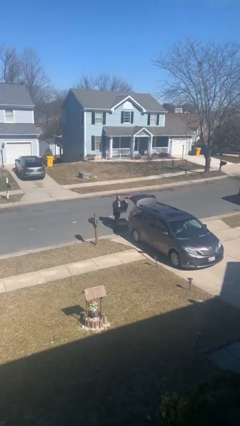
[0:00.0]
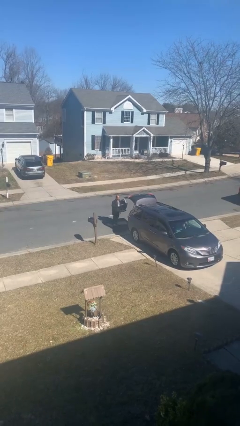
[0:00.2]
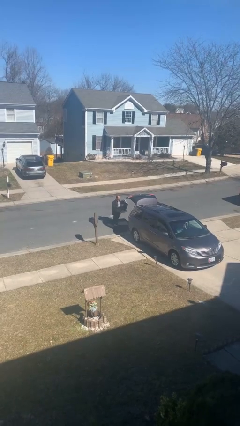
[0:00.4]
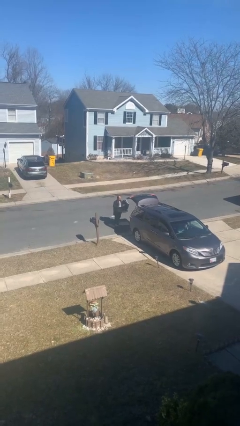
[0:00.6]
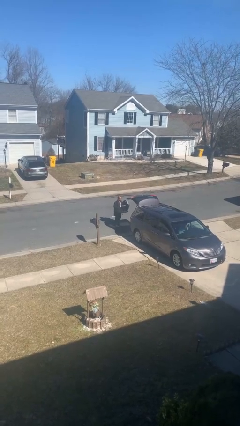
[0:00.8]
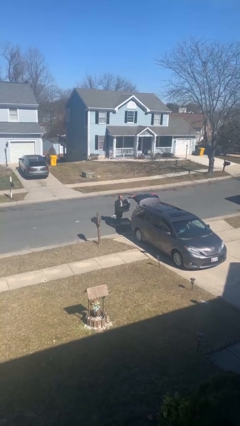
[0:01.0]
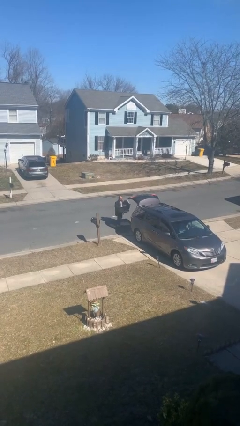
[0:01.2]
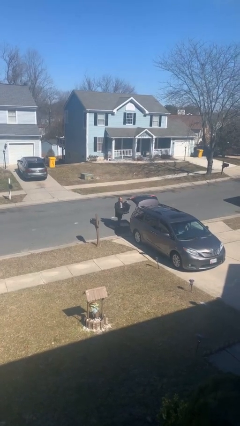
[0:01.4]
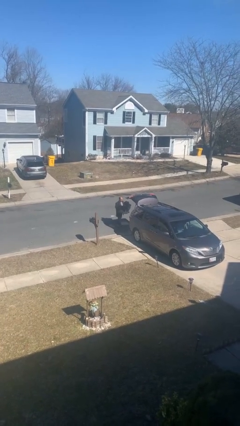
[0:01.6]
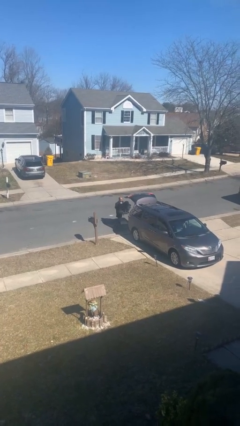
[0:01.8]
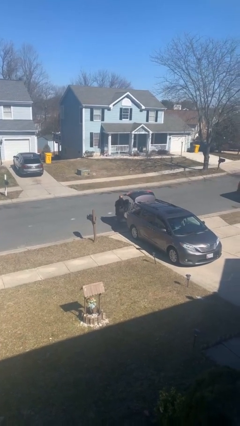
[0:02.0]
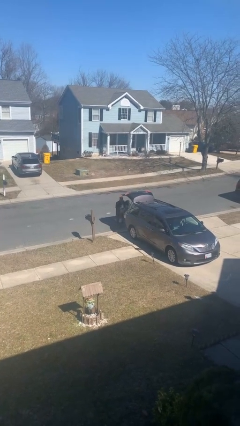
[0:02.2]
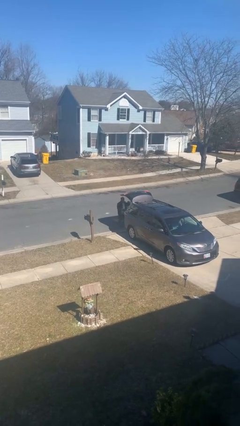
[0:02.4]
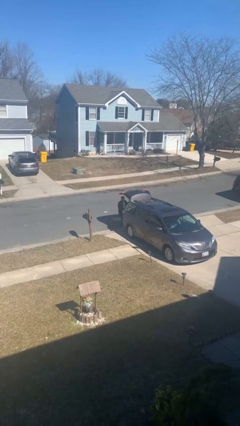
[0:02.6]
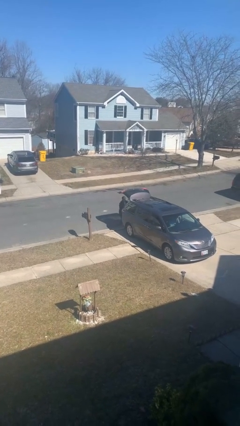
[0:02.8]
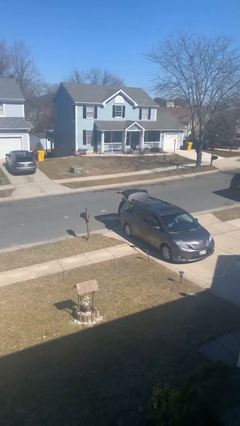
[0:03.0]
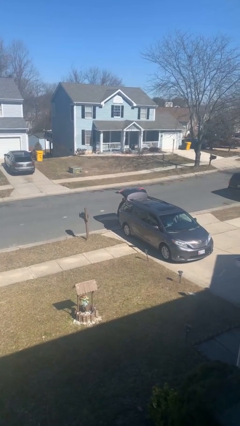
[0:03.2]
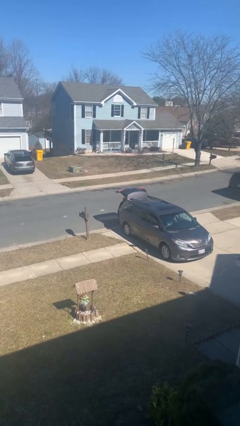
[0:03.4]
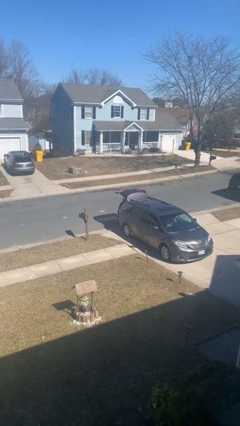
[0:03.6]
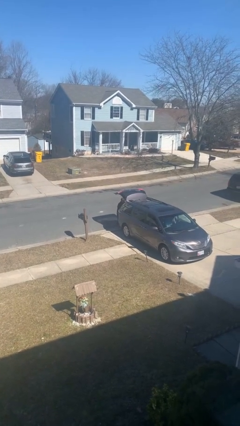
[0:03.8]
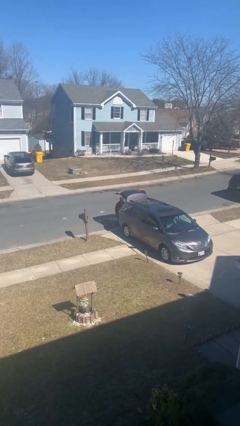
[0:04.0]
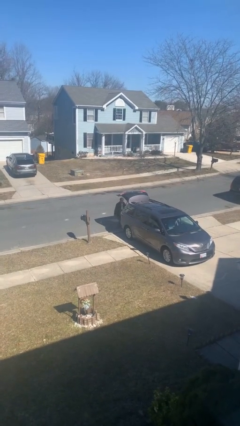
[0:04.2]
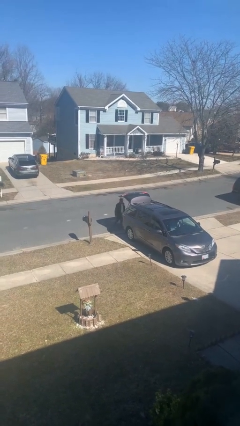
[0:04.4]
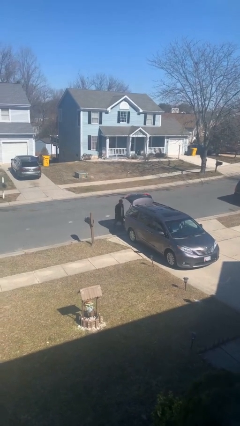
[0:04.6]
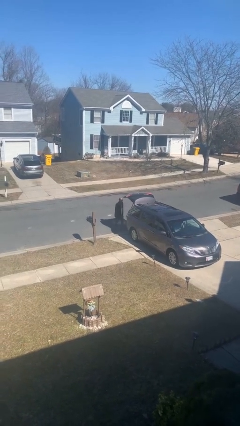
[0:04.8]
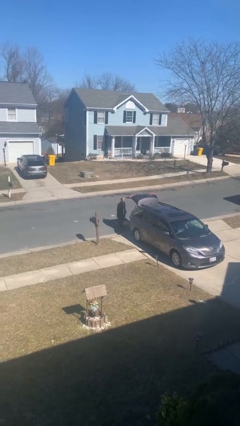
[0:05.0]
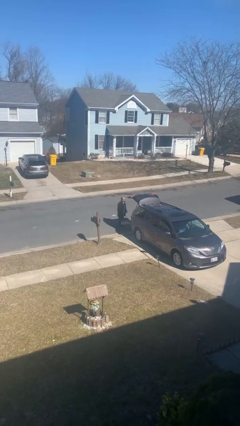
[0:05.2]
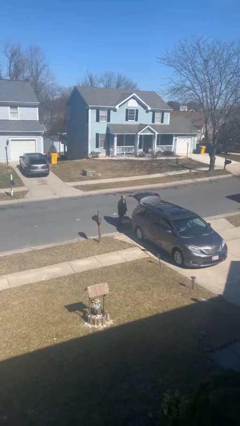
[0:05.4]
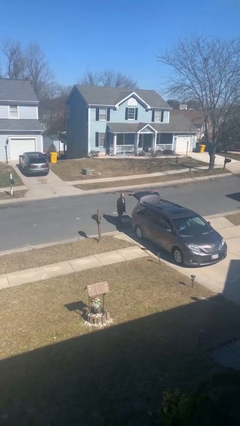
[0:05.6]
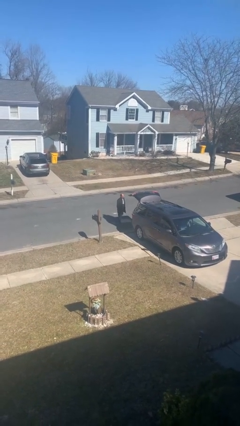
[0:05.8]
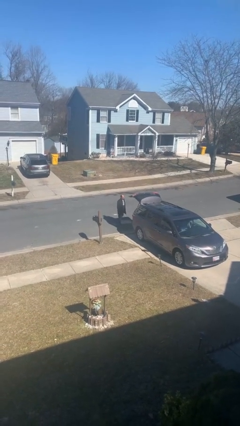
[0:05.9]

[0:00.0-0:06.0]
person loads car

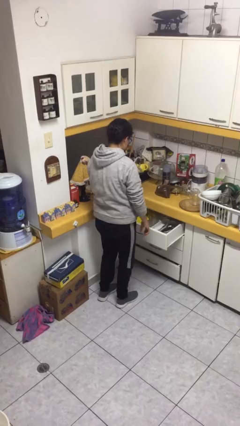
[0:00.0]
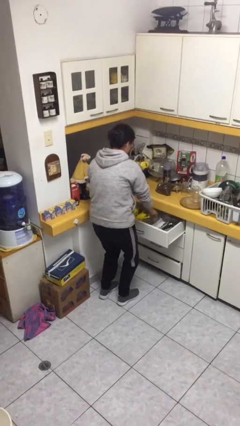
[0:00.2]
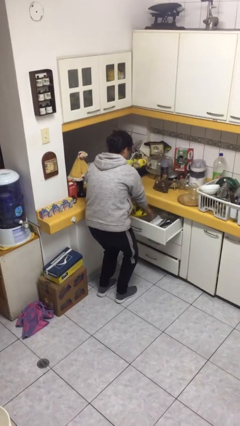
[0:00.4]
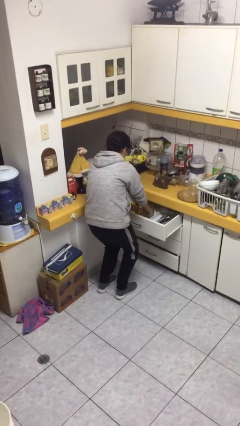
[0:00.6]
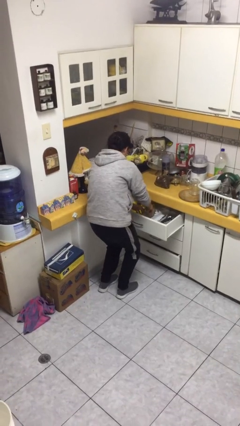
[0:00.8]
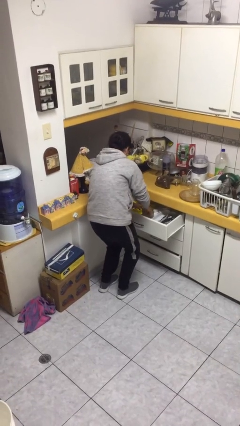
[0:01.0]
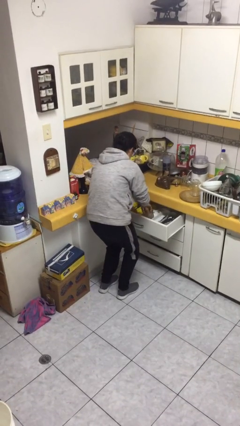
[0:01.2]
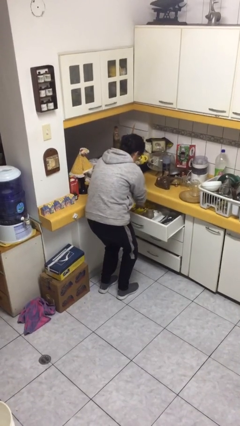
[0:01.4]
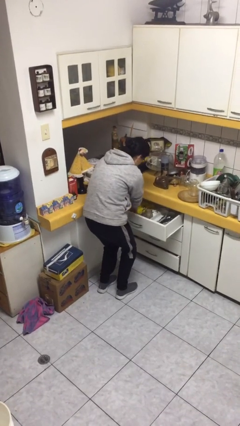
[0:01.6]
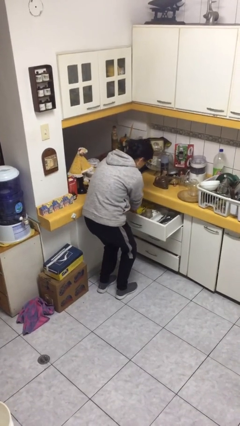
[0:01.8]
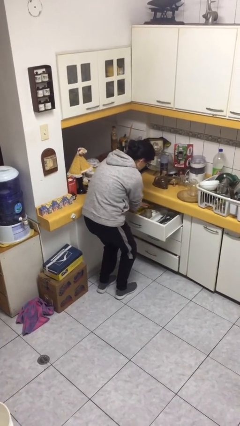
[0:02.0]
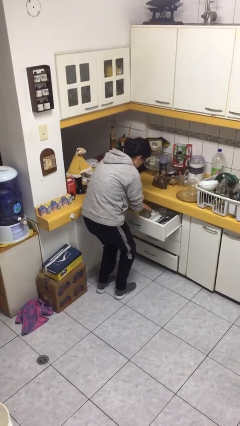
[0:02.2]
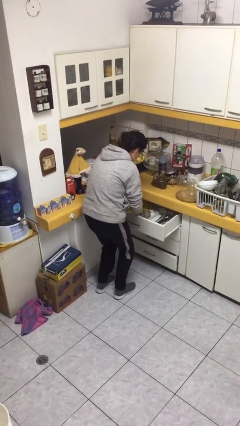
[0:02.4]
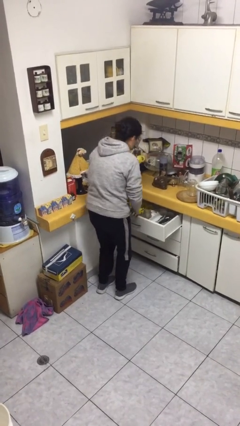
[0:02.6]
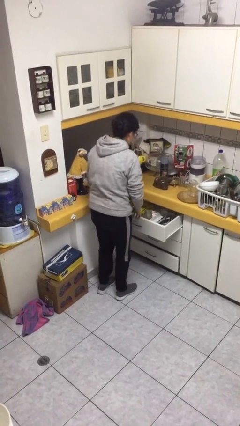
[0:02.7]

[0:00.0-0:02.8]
person searches in kitchen drawer

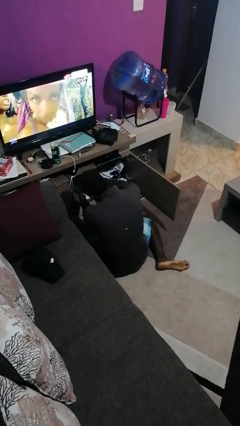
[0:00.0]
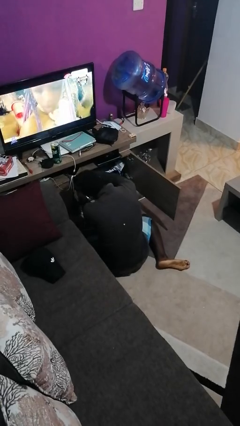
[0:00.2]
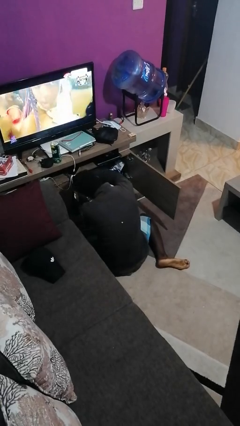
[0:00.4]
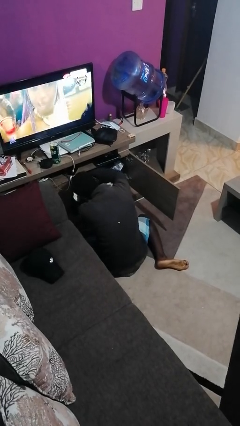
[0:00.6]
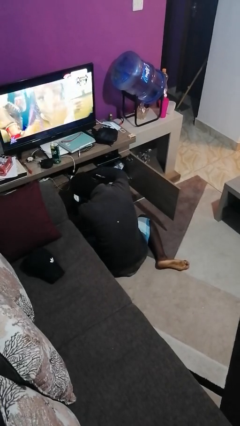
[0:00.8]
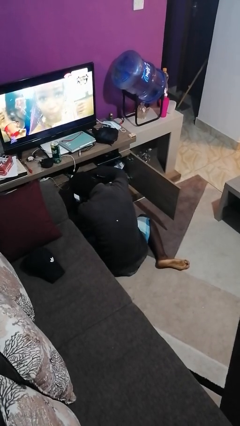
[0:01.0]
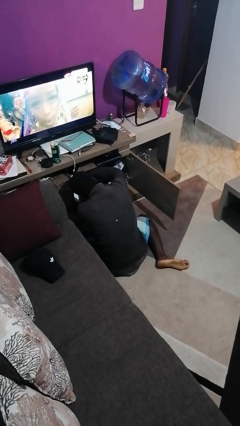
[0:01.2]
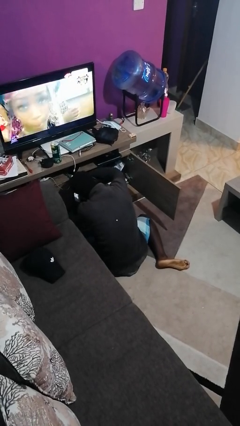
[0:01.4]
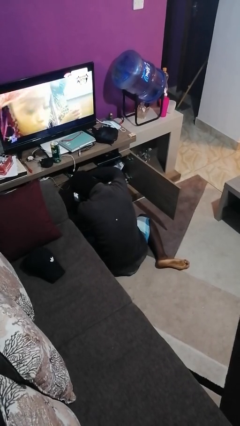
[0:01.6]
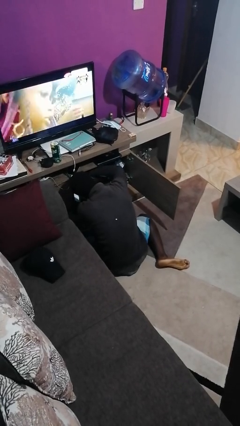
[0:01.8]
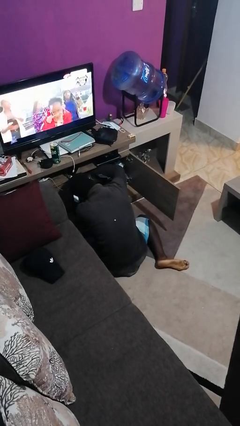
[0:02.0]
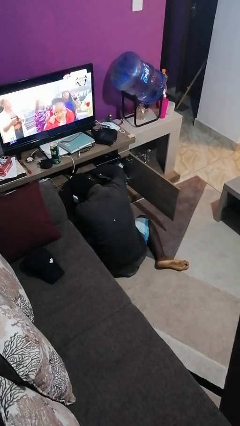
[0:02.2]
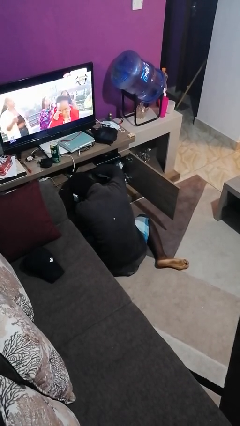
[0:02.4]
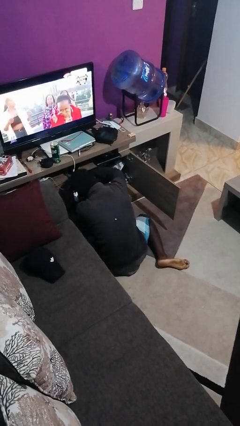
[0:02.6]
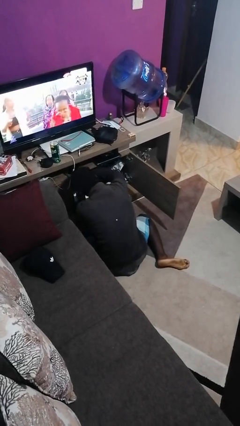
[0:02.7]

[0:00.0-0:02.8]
person searches in cabinet

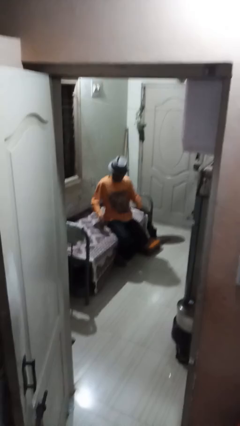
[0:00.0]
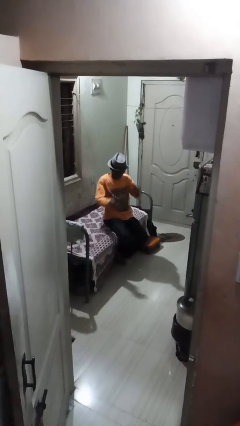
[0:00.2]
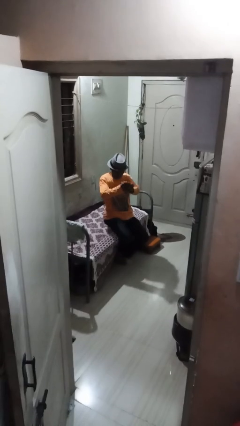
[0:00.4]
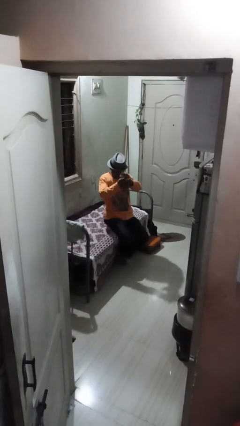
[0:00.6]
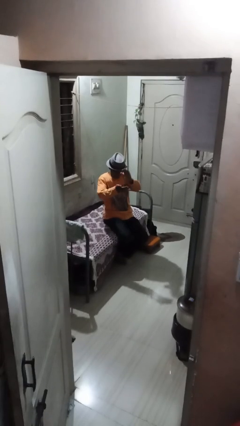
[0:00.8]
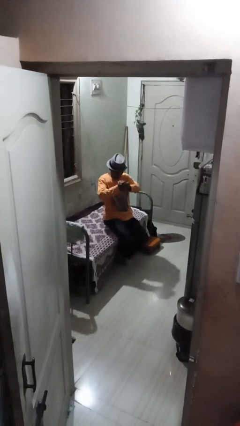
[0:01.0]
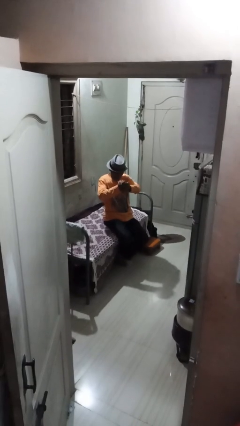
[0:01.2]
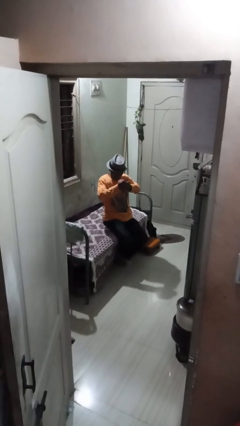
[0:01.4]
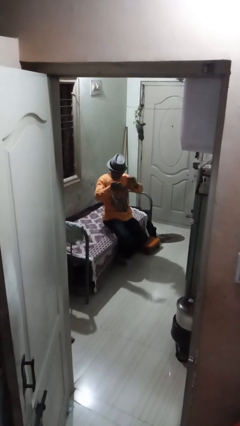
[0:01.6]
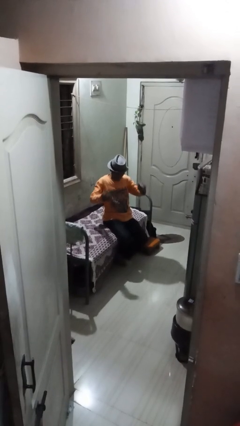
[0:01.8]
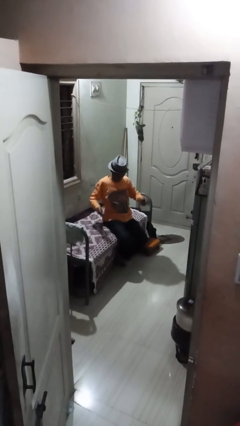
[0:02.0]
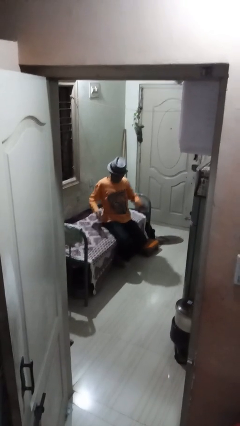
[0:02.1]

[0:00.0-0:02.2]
person claps hands

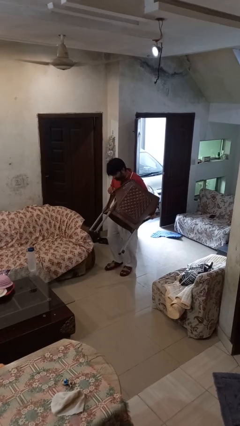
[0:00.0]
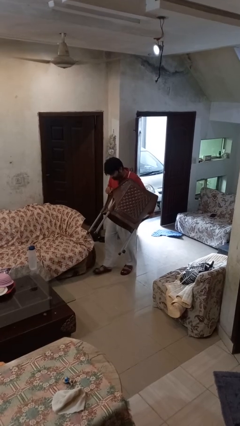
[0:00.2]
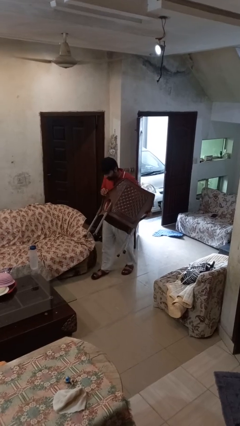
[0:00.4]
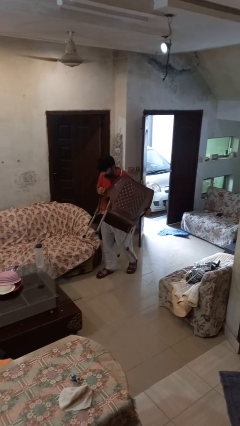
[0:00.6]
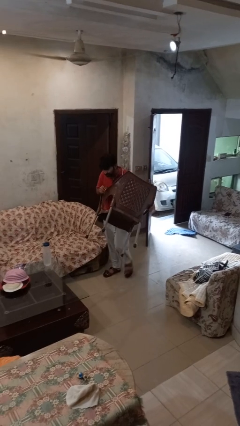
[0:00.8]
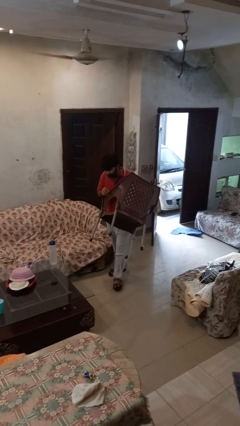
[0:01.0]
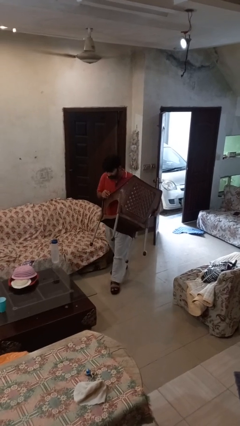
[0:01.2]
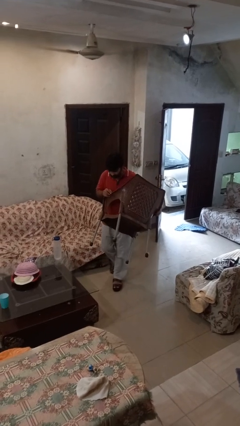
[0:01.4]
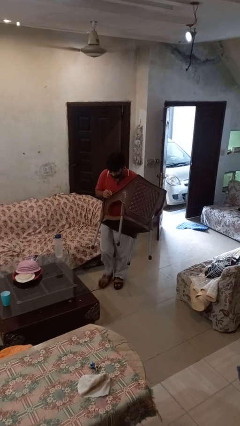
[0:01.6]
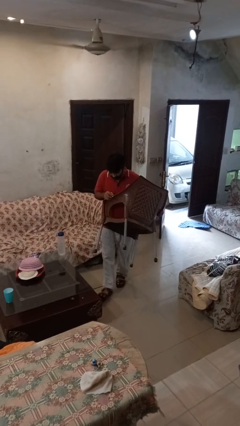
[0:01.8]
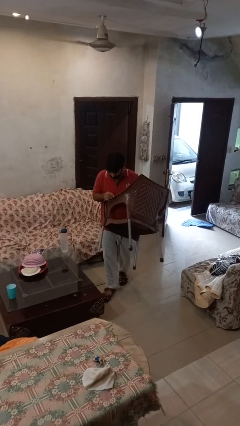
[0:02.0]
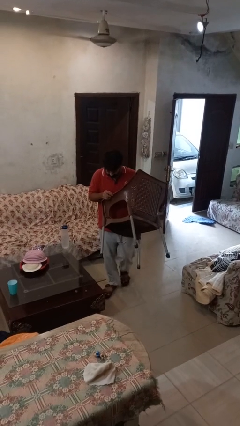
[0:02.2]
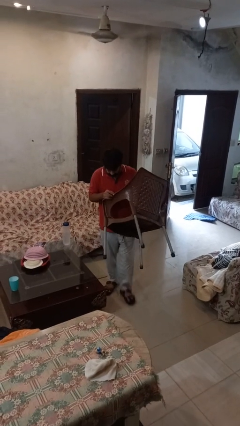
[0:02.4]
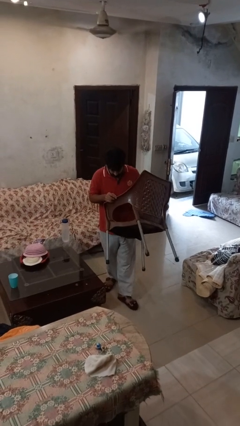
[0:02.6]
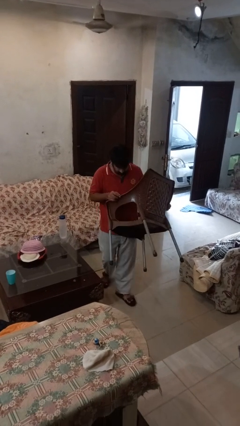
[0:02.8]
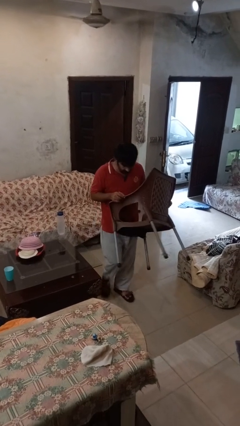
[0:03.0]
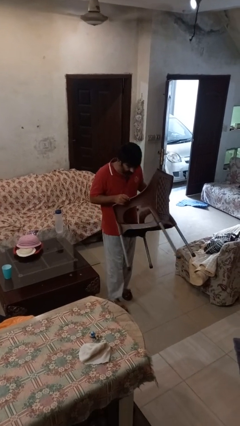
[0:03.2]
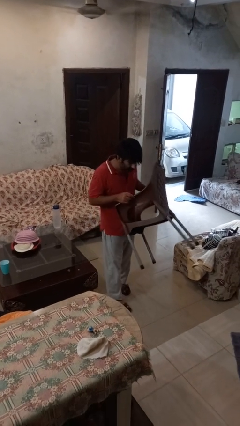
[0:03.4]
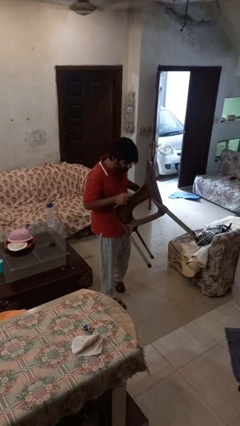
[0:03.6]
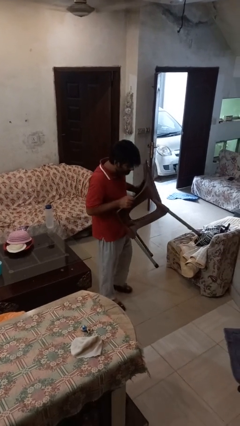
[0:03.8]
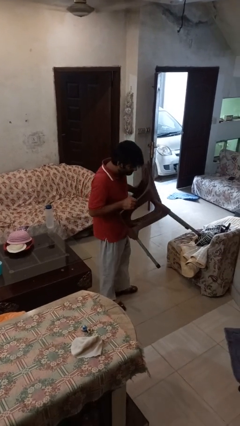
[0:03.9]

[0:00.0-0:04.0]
person carries furniture

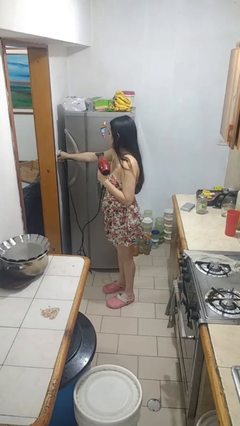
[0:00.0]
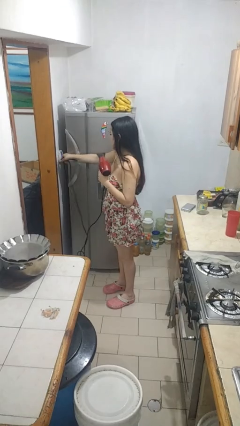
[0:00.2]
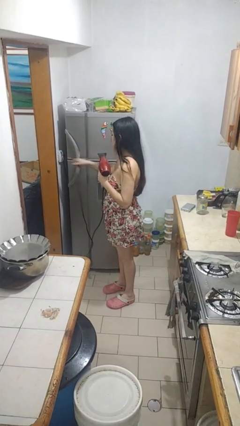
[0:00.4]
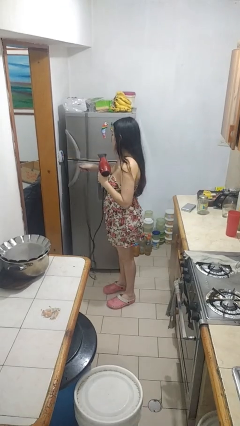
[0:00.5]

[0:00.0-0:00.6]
person unplugs from electrical socket
